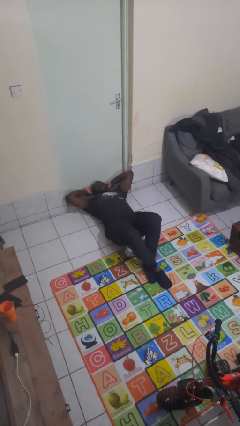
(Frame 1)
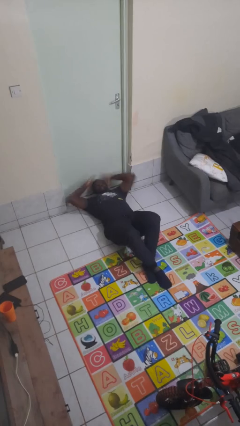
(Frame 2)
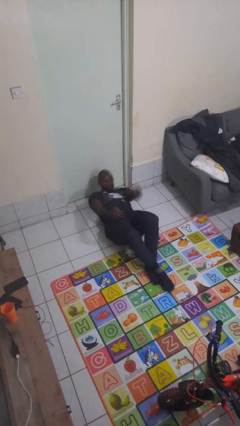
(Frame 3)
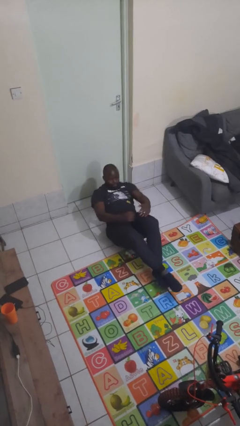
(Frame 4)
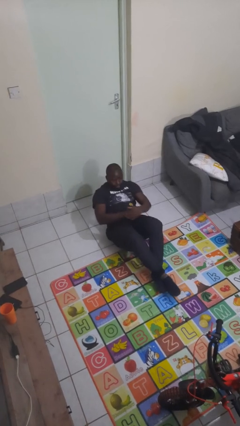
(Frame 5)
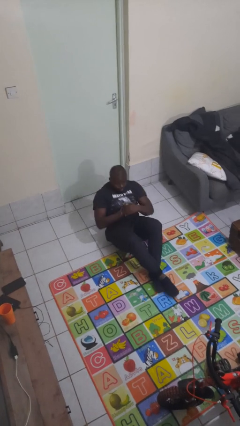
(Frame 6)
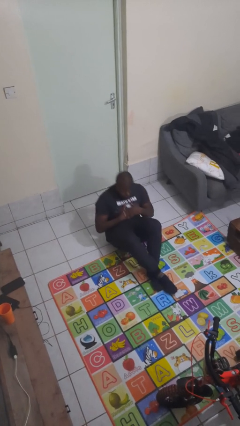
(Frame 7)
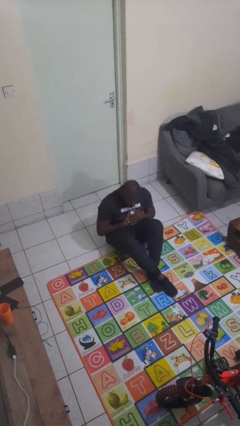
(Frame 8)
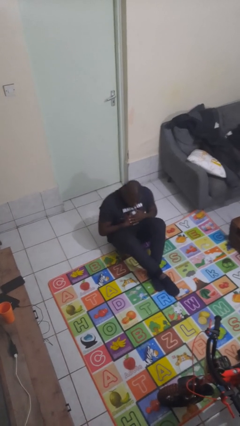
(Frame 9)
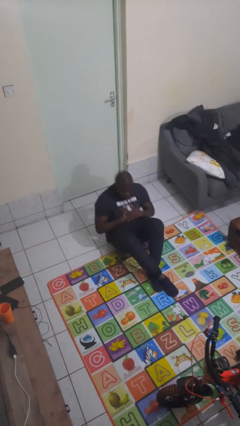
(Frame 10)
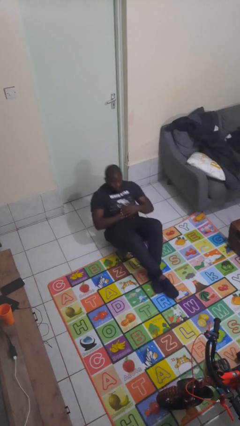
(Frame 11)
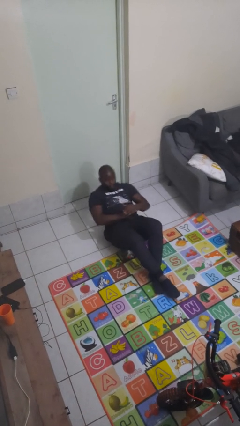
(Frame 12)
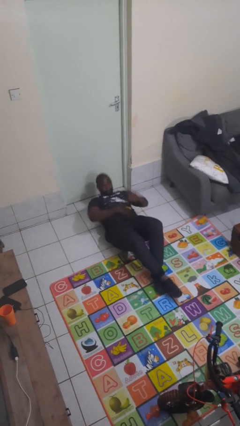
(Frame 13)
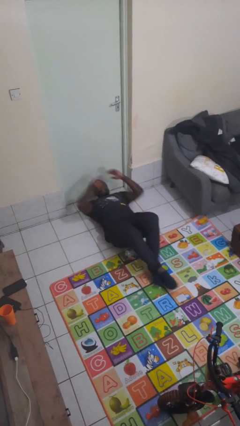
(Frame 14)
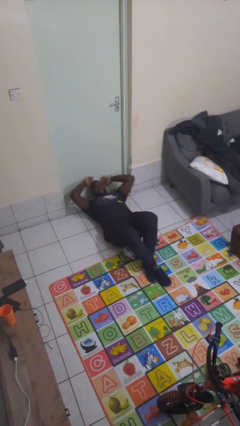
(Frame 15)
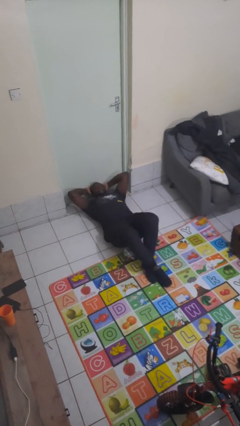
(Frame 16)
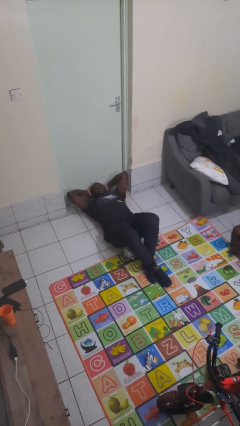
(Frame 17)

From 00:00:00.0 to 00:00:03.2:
person exercises with situp

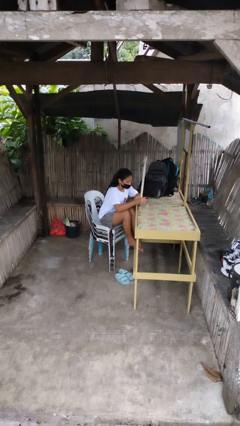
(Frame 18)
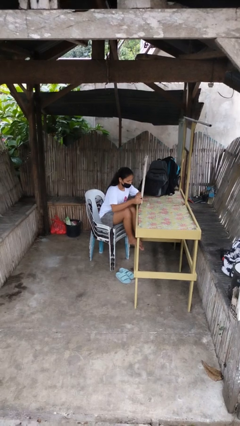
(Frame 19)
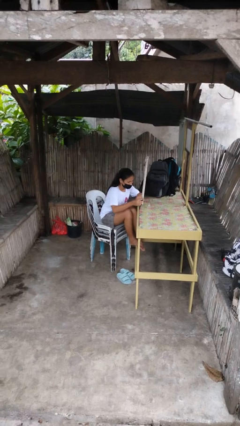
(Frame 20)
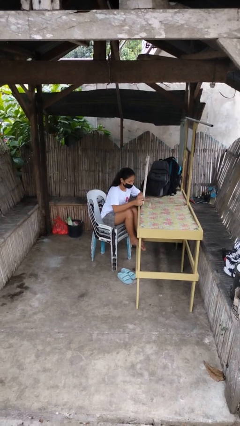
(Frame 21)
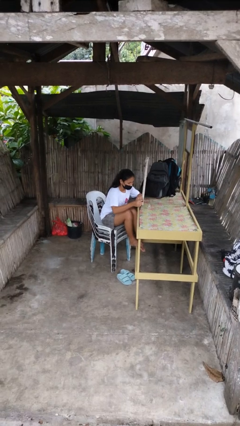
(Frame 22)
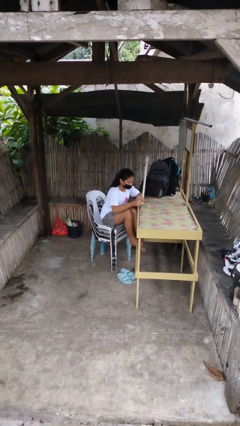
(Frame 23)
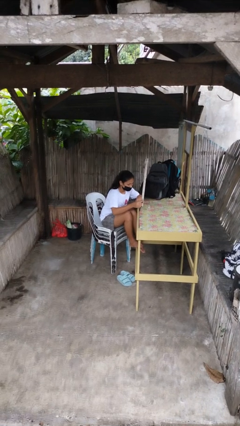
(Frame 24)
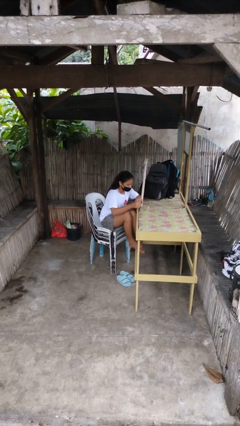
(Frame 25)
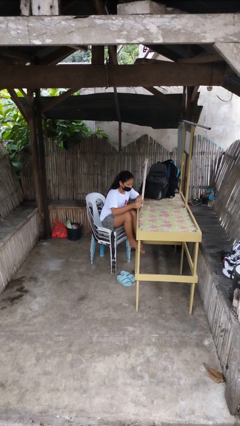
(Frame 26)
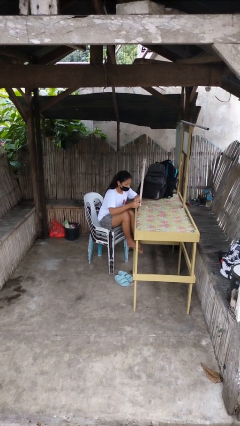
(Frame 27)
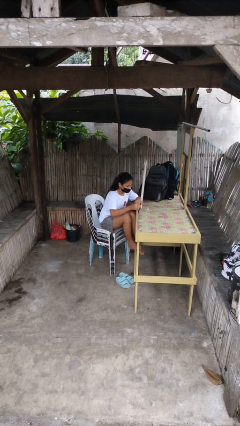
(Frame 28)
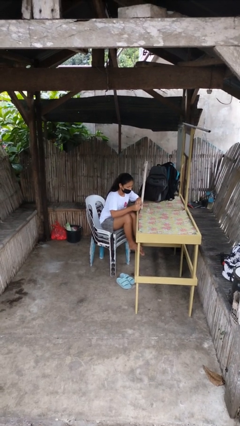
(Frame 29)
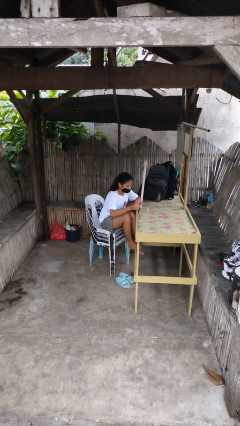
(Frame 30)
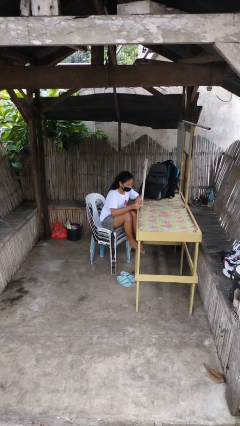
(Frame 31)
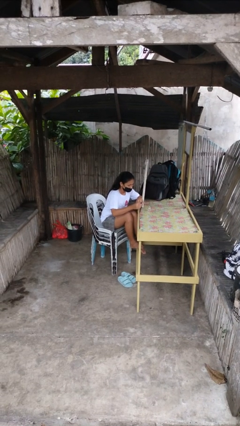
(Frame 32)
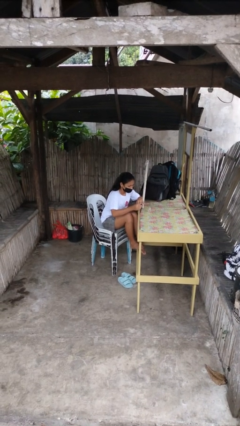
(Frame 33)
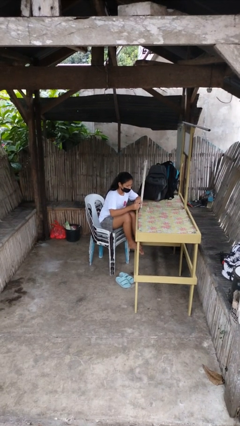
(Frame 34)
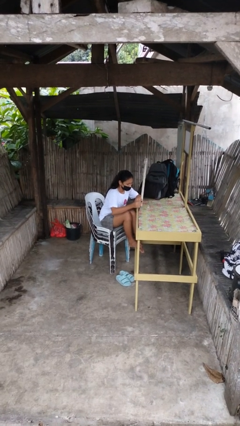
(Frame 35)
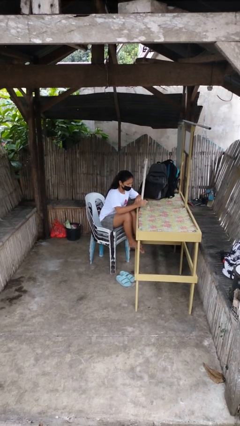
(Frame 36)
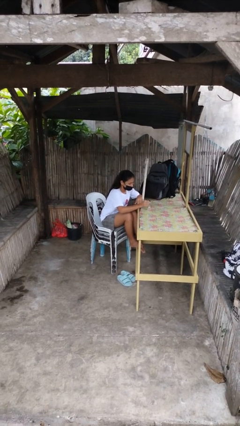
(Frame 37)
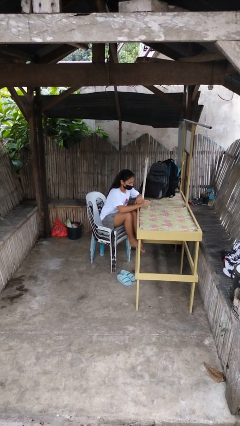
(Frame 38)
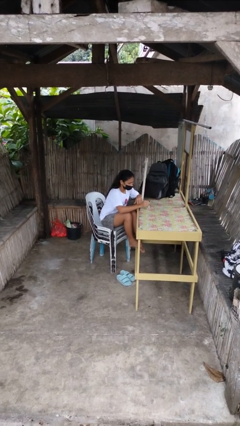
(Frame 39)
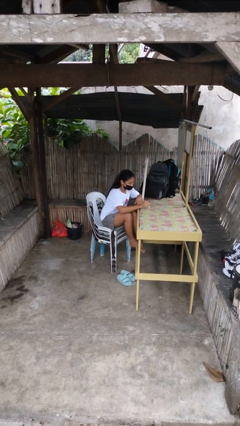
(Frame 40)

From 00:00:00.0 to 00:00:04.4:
person paints fingernails

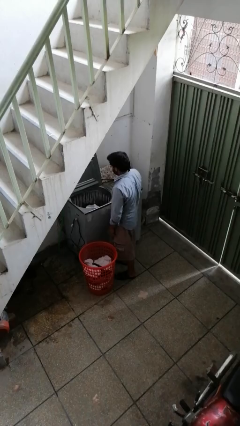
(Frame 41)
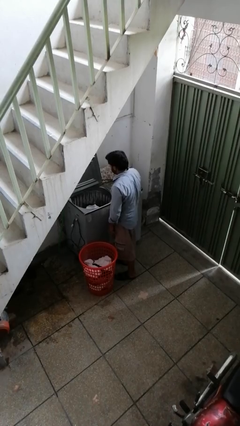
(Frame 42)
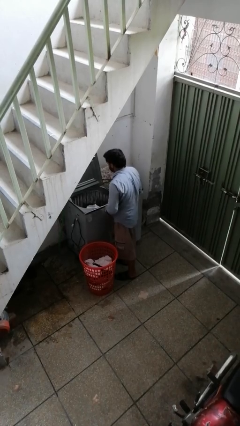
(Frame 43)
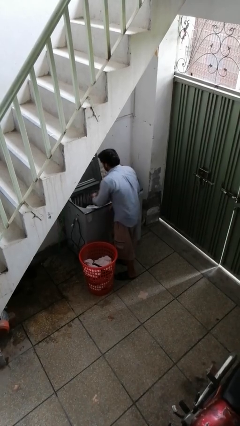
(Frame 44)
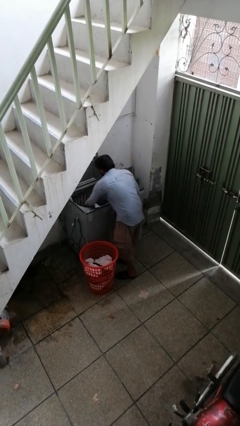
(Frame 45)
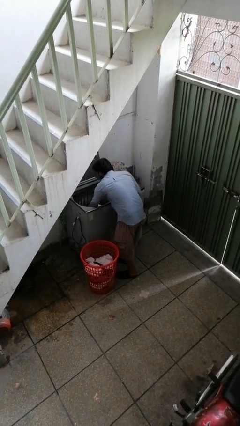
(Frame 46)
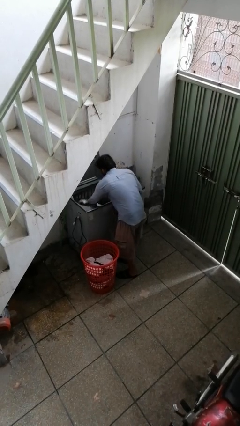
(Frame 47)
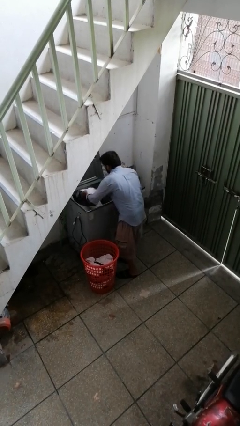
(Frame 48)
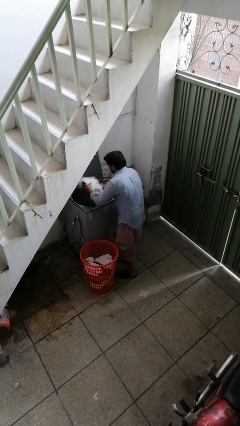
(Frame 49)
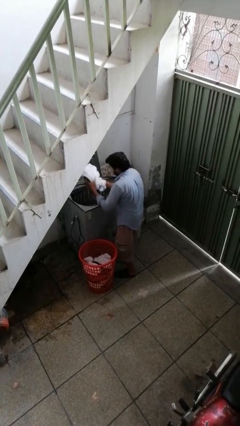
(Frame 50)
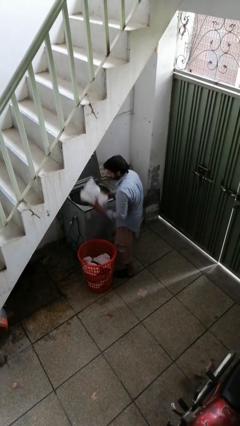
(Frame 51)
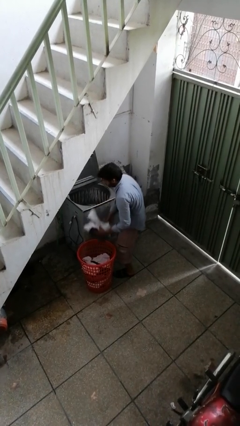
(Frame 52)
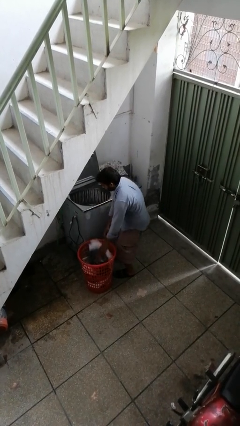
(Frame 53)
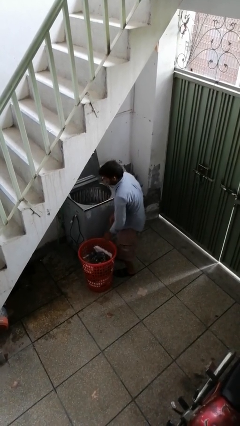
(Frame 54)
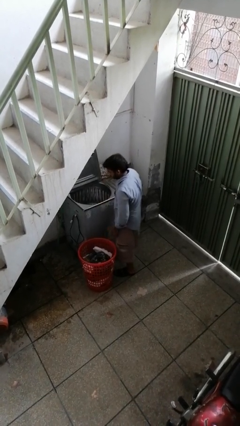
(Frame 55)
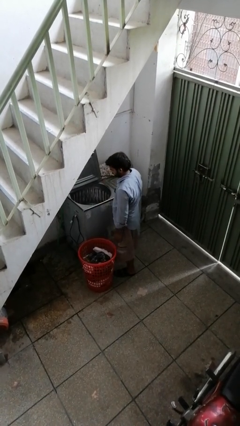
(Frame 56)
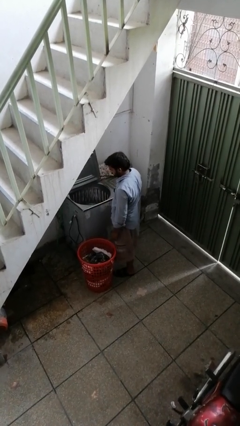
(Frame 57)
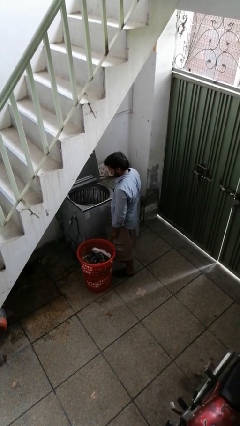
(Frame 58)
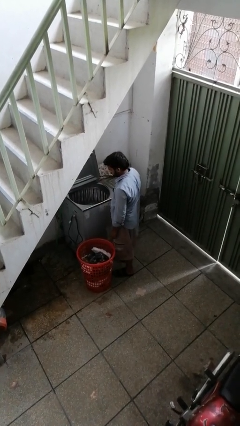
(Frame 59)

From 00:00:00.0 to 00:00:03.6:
person unloads clotheswasher

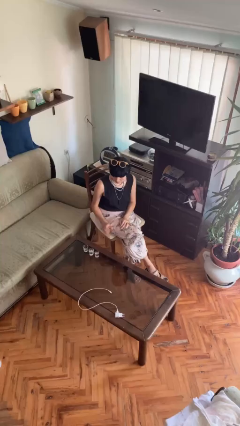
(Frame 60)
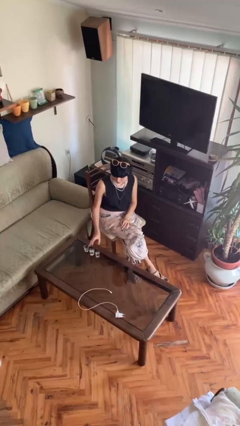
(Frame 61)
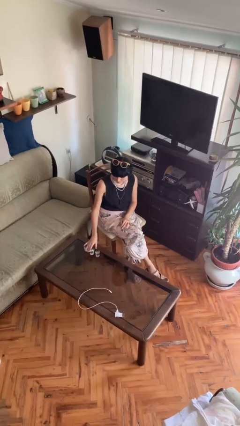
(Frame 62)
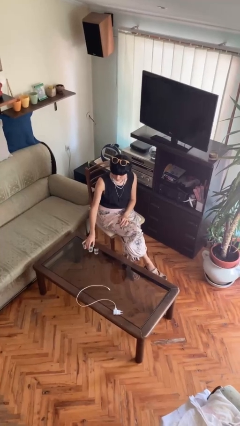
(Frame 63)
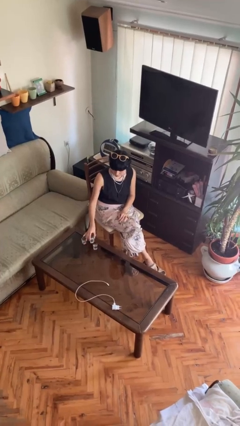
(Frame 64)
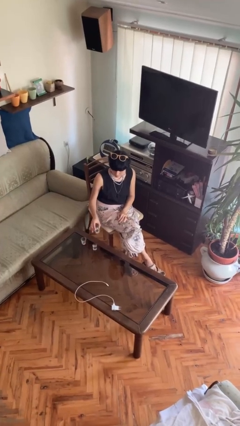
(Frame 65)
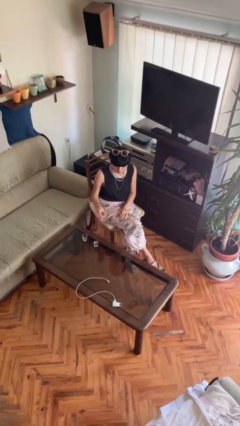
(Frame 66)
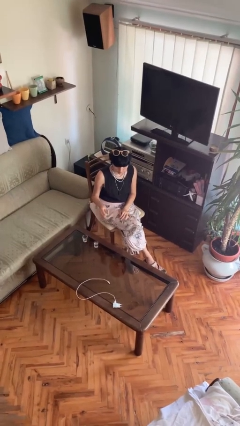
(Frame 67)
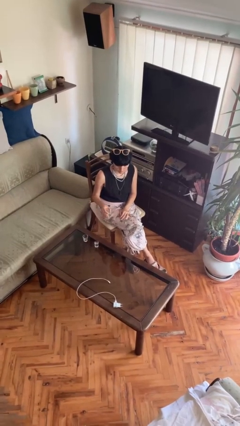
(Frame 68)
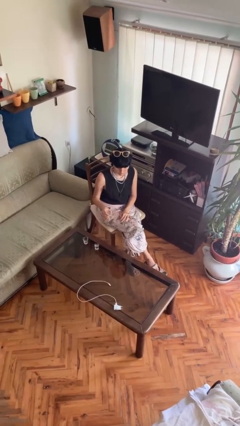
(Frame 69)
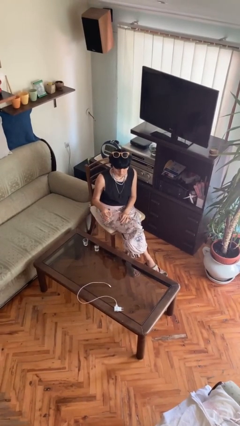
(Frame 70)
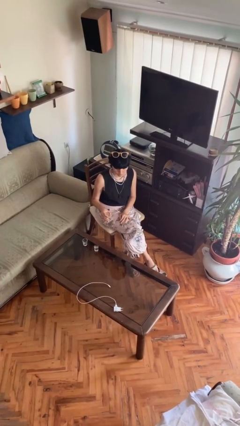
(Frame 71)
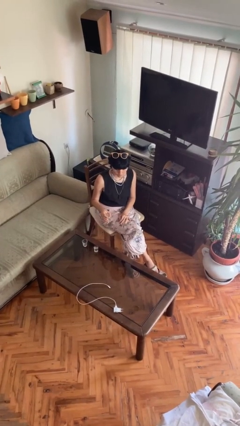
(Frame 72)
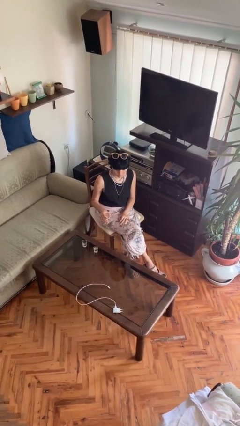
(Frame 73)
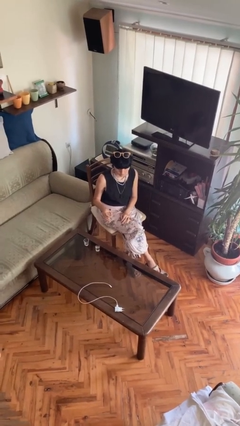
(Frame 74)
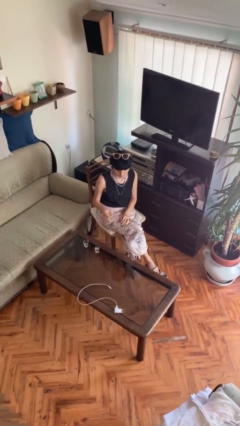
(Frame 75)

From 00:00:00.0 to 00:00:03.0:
person picks up object from table

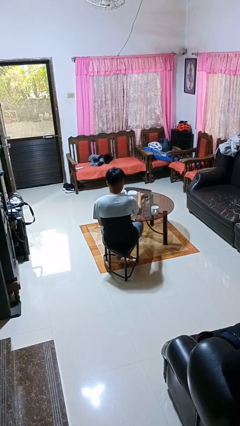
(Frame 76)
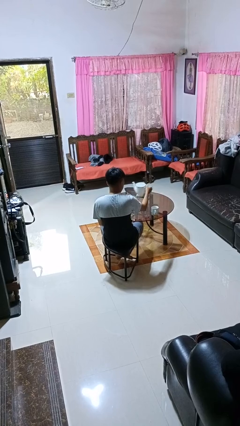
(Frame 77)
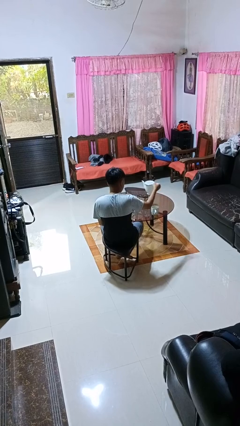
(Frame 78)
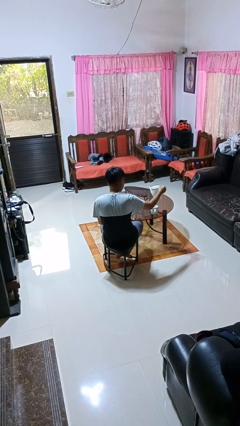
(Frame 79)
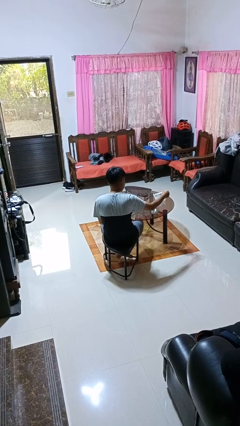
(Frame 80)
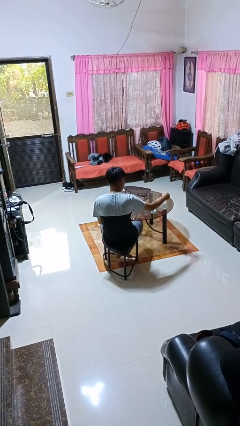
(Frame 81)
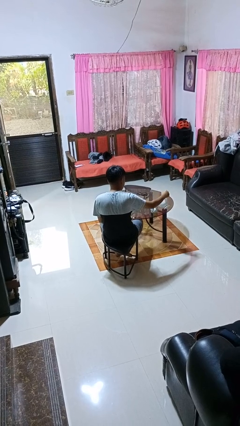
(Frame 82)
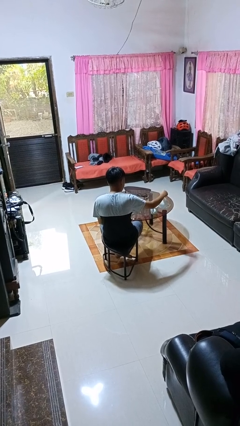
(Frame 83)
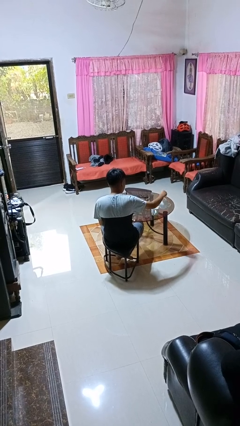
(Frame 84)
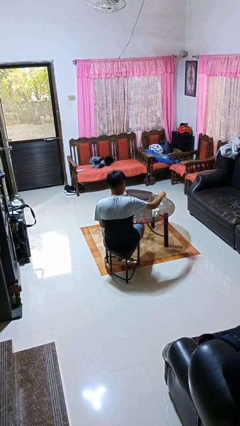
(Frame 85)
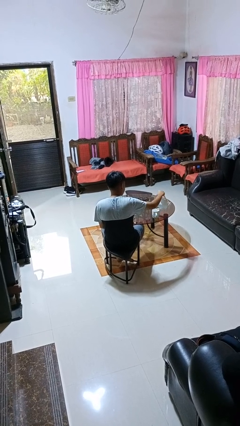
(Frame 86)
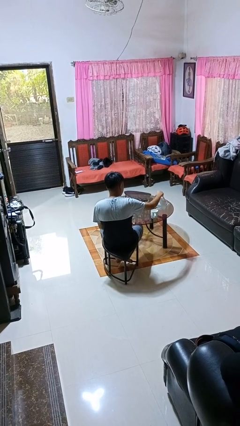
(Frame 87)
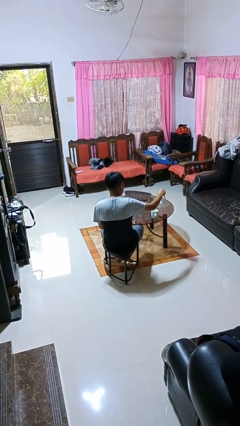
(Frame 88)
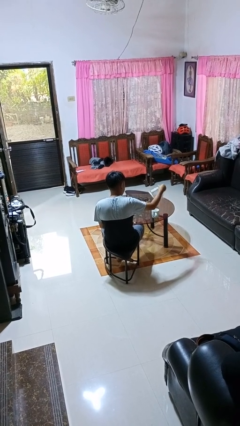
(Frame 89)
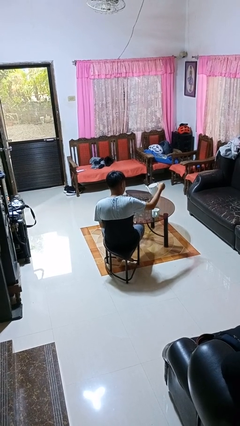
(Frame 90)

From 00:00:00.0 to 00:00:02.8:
person pours coffee into mug

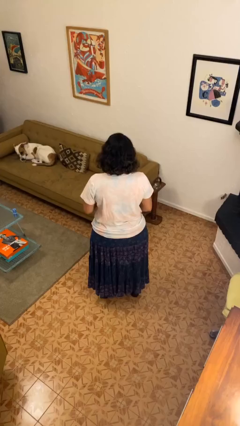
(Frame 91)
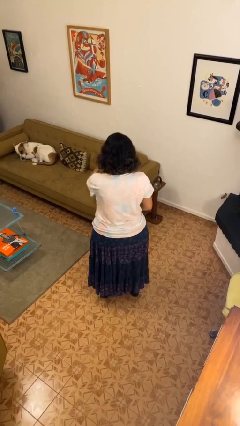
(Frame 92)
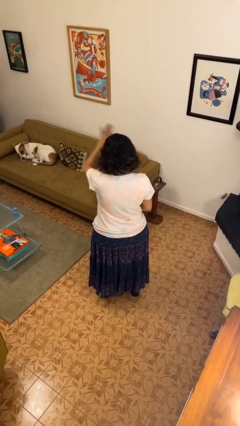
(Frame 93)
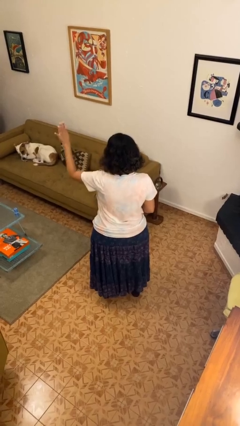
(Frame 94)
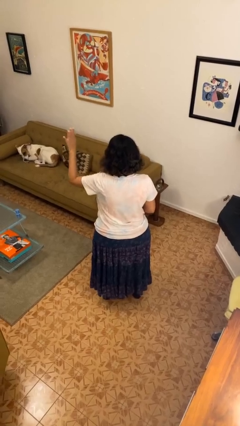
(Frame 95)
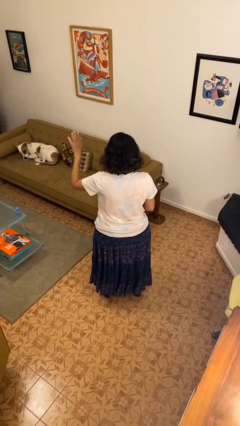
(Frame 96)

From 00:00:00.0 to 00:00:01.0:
person gestures swipe left
